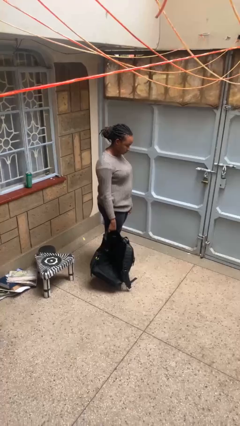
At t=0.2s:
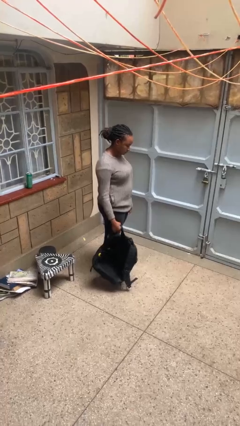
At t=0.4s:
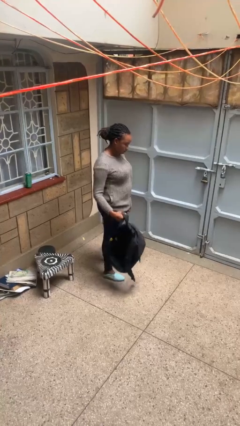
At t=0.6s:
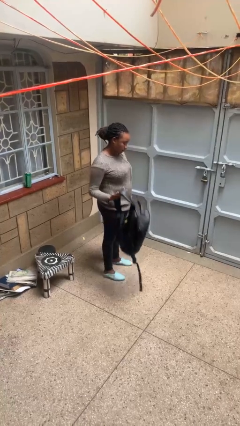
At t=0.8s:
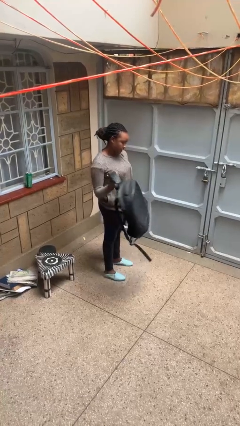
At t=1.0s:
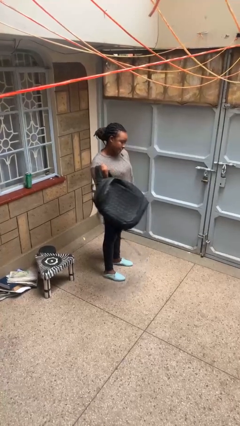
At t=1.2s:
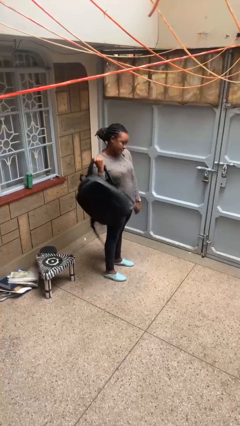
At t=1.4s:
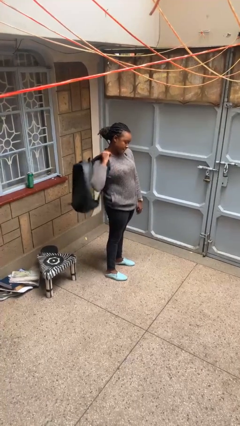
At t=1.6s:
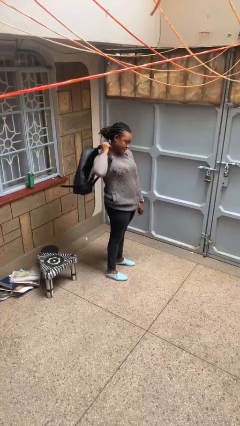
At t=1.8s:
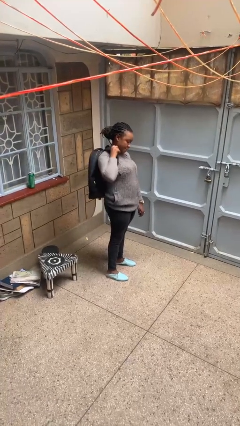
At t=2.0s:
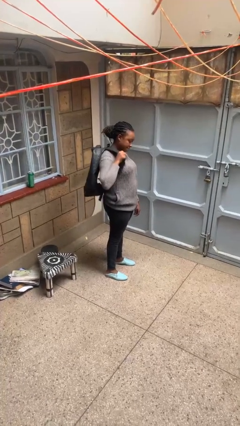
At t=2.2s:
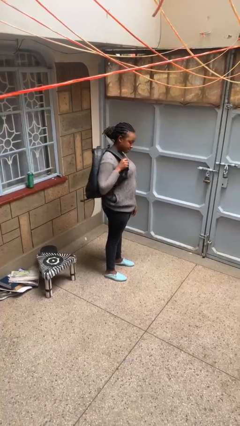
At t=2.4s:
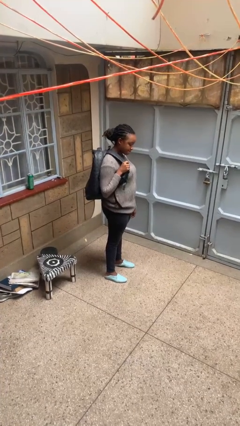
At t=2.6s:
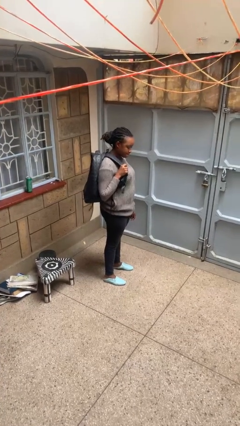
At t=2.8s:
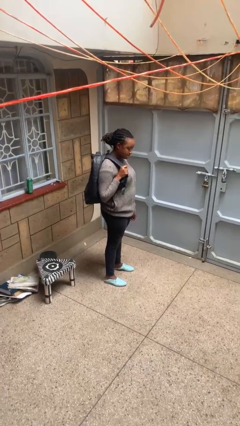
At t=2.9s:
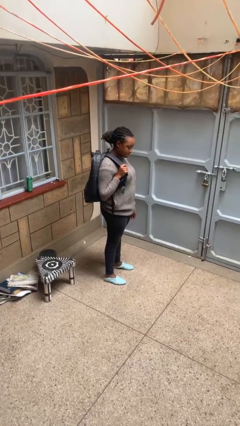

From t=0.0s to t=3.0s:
person puts on backpack

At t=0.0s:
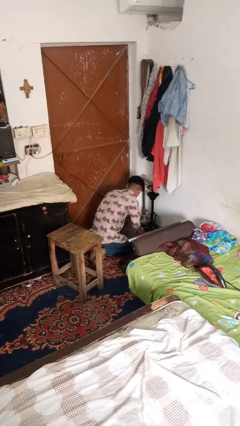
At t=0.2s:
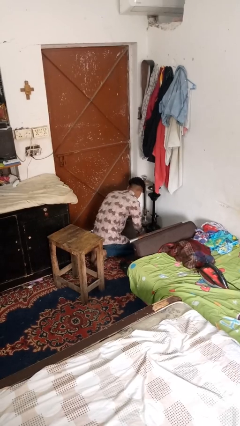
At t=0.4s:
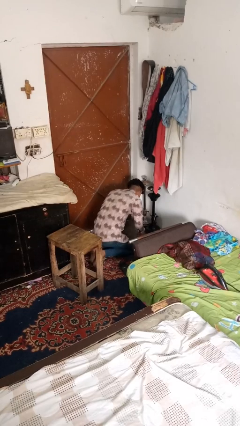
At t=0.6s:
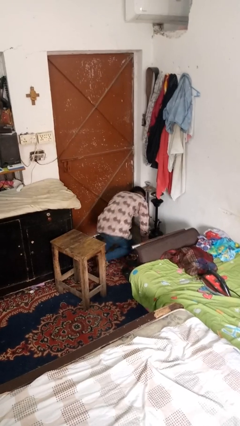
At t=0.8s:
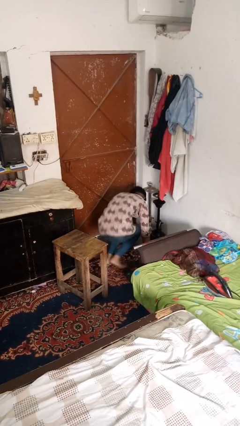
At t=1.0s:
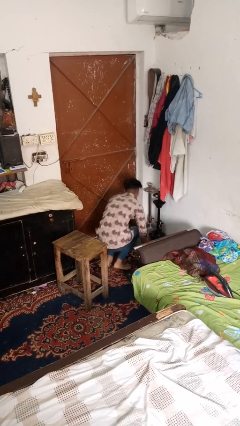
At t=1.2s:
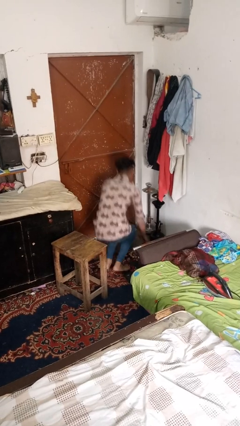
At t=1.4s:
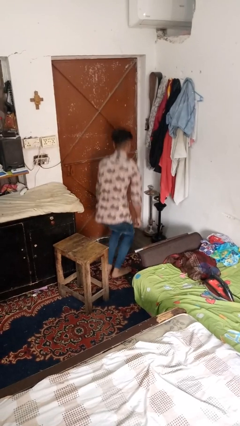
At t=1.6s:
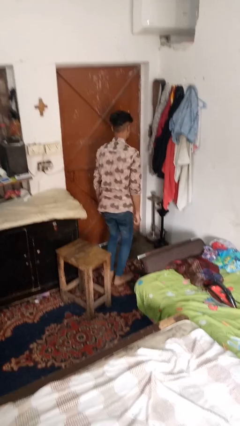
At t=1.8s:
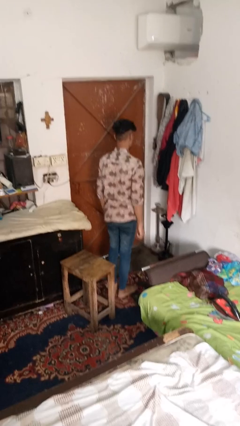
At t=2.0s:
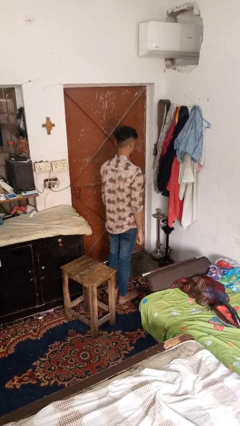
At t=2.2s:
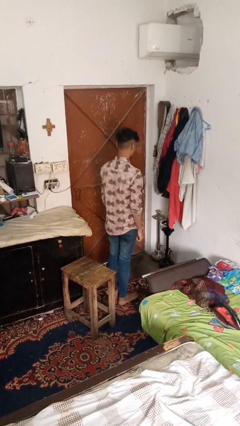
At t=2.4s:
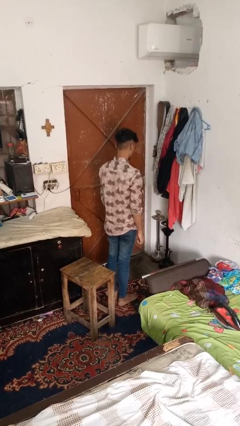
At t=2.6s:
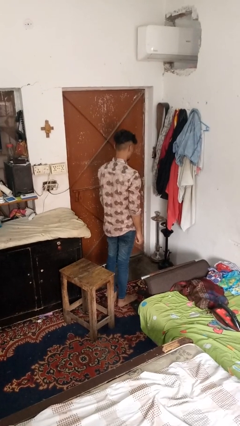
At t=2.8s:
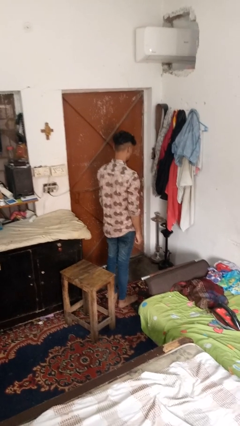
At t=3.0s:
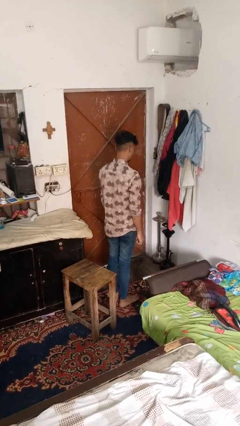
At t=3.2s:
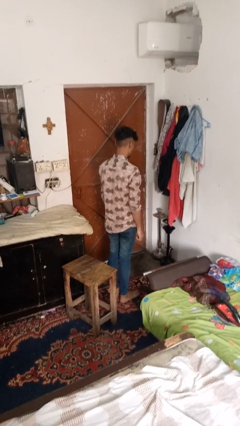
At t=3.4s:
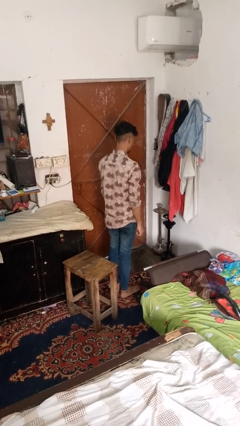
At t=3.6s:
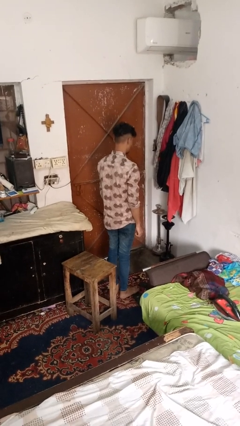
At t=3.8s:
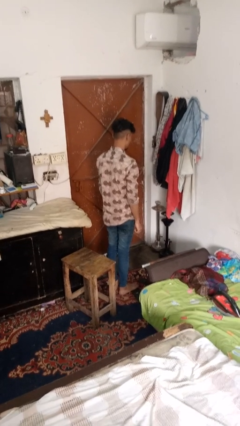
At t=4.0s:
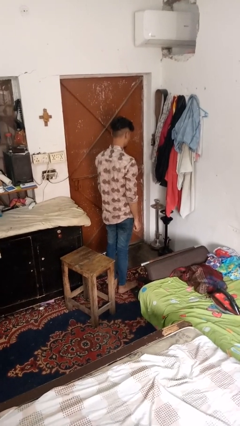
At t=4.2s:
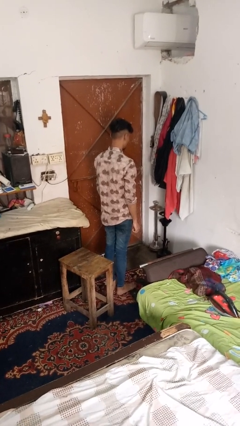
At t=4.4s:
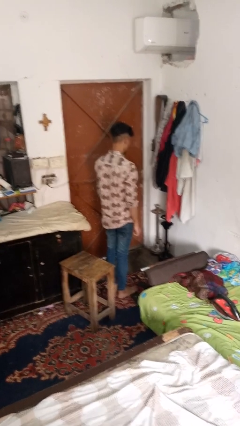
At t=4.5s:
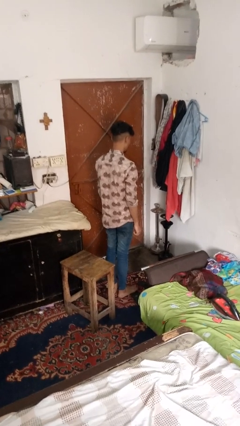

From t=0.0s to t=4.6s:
person stands up from floor

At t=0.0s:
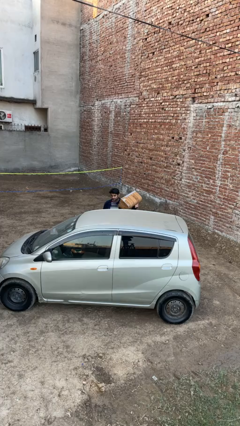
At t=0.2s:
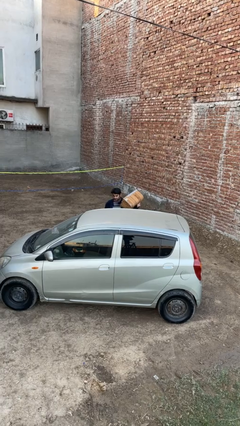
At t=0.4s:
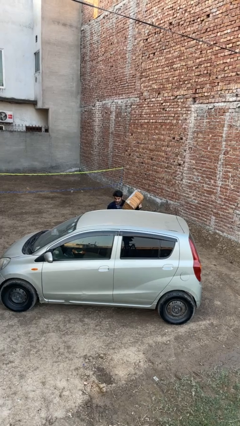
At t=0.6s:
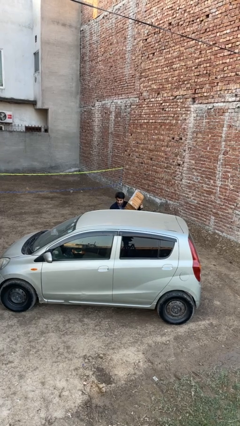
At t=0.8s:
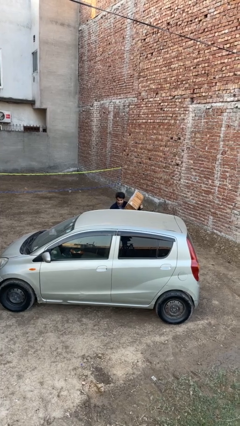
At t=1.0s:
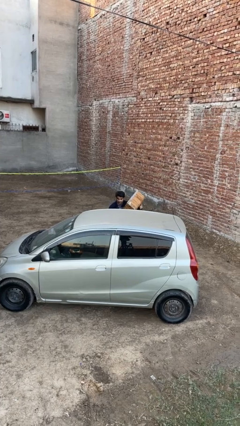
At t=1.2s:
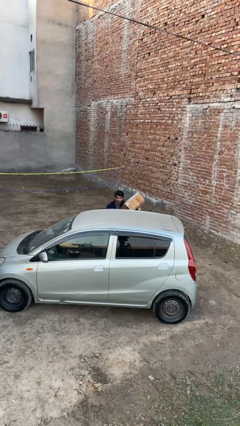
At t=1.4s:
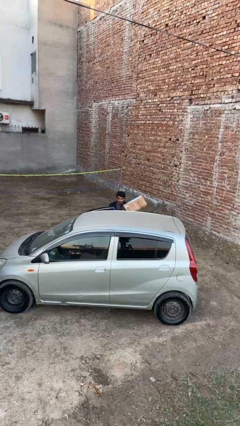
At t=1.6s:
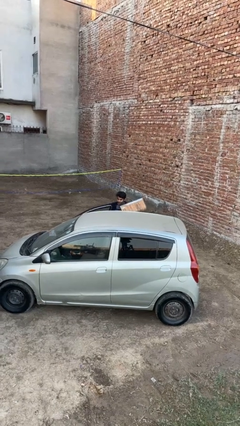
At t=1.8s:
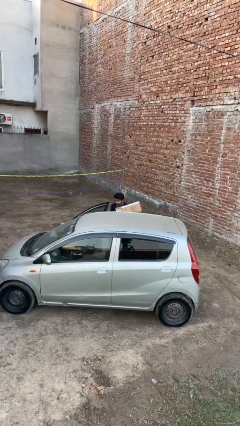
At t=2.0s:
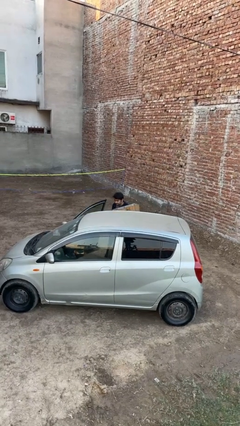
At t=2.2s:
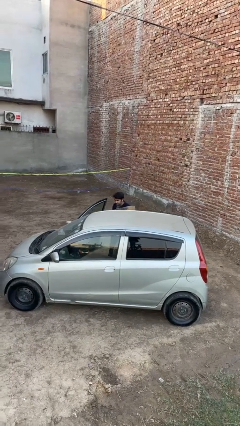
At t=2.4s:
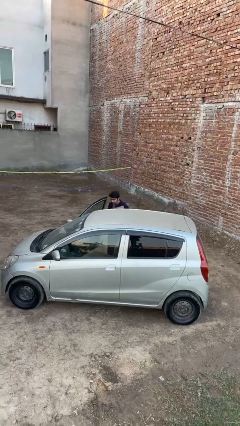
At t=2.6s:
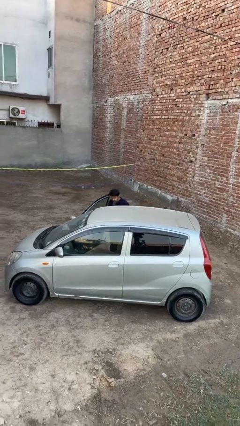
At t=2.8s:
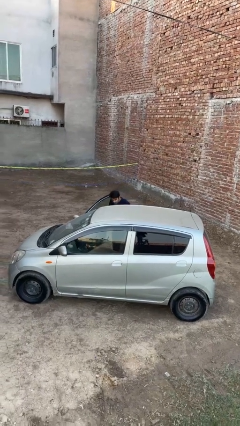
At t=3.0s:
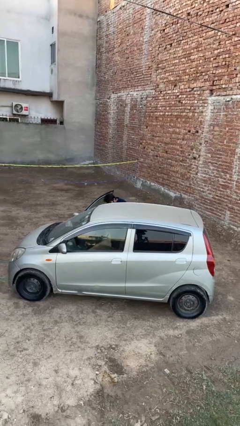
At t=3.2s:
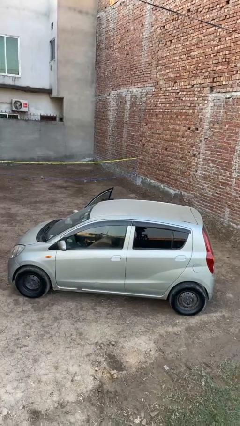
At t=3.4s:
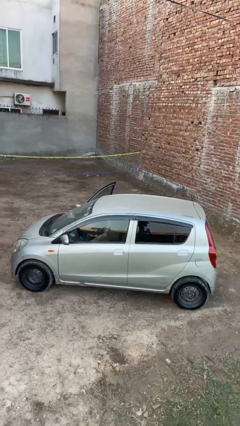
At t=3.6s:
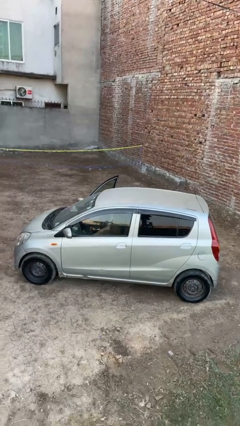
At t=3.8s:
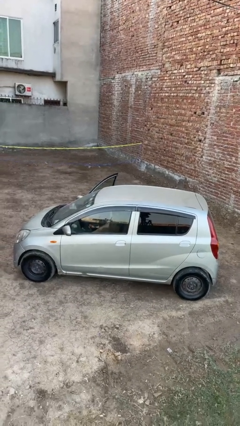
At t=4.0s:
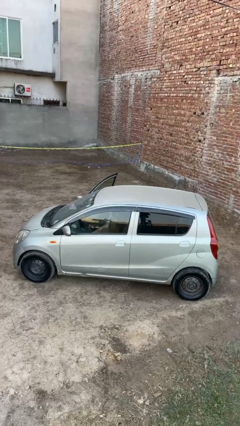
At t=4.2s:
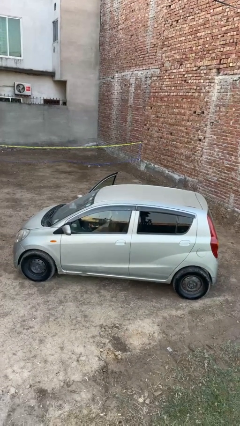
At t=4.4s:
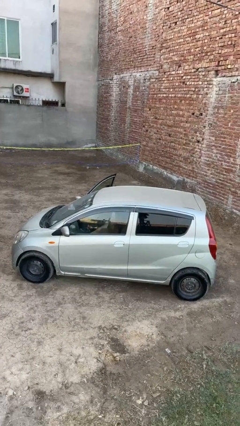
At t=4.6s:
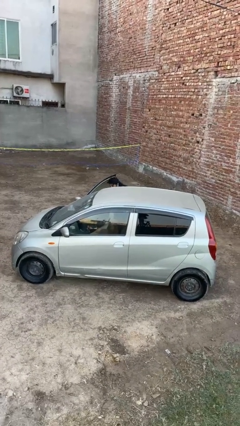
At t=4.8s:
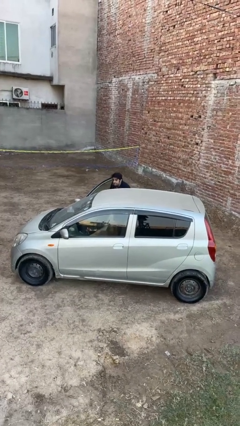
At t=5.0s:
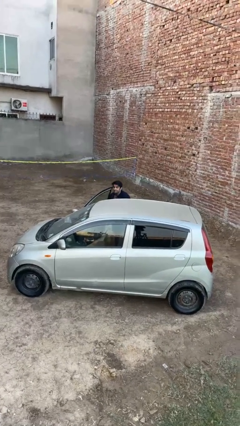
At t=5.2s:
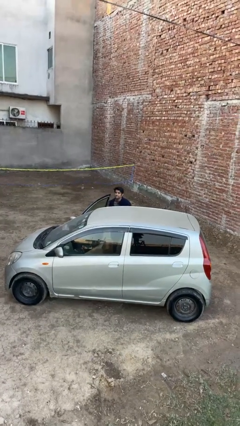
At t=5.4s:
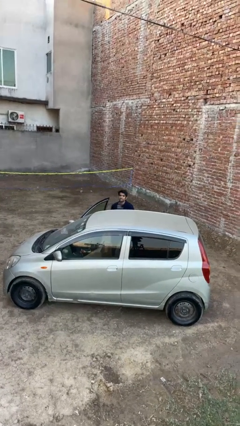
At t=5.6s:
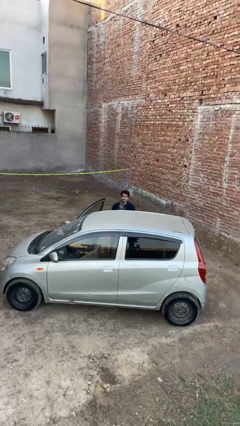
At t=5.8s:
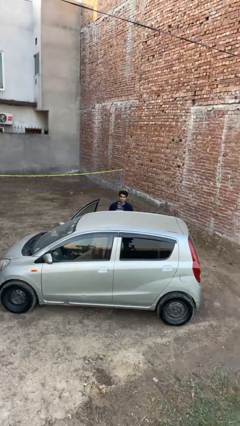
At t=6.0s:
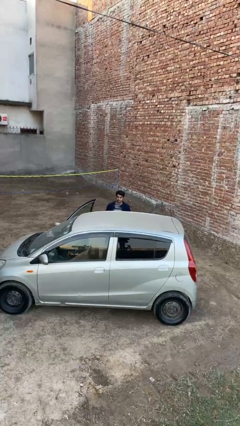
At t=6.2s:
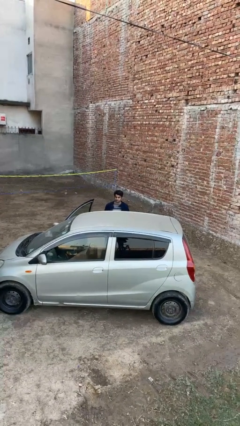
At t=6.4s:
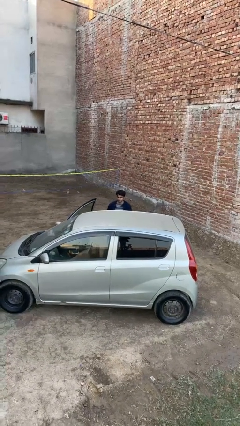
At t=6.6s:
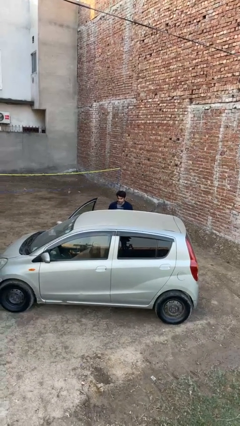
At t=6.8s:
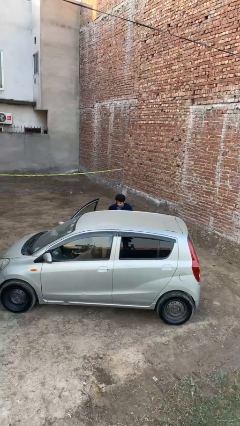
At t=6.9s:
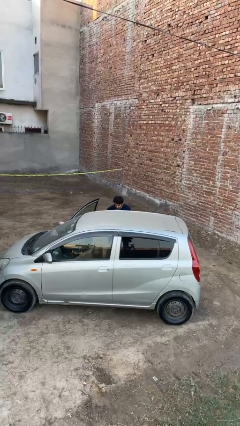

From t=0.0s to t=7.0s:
person loads car

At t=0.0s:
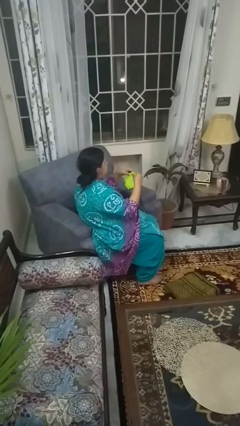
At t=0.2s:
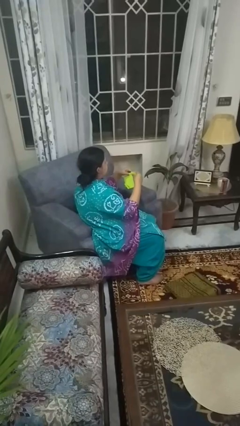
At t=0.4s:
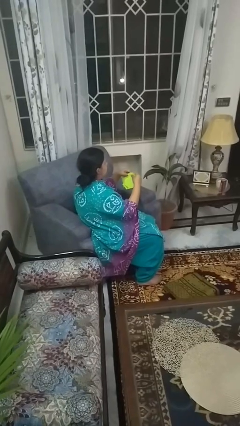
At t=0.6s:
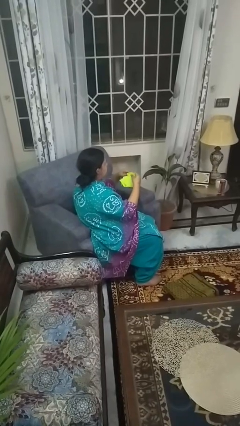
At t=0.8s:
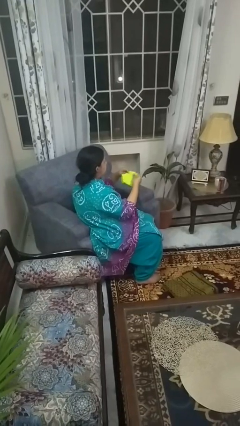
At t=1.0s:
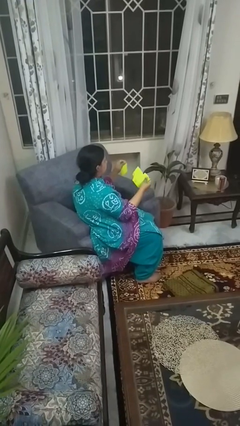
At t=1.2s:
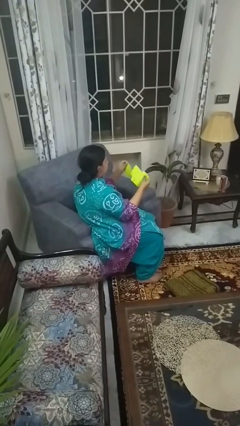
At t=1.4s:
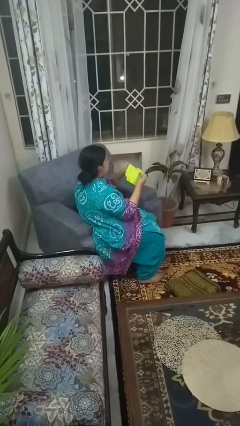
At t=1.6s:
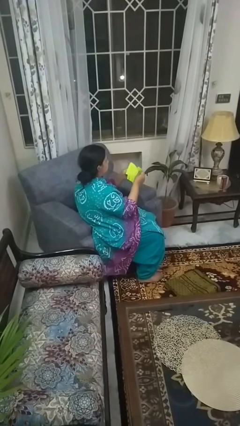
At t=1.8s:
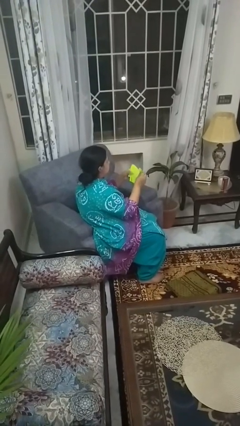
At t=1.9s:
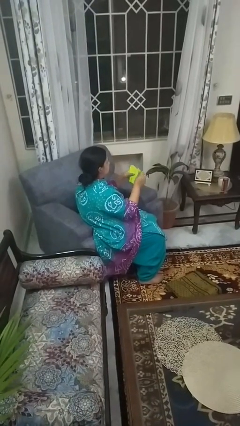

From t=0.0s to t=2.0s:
person tears paper

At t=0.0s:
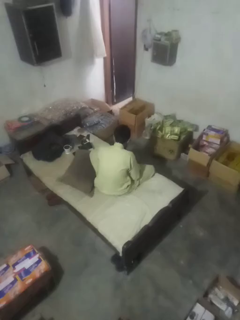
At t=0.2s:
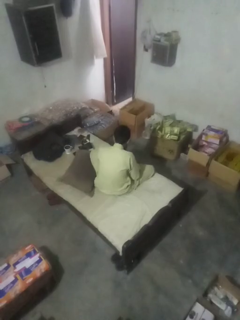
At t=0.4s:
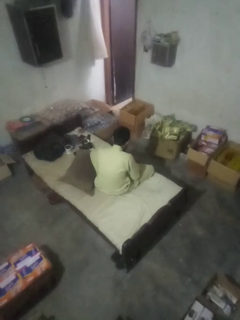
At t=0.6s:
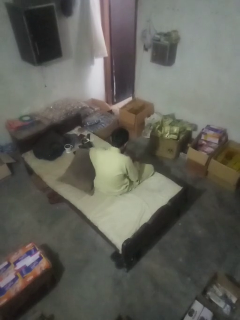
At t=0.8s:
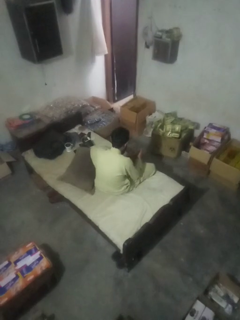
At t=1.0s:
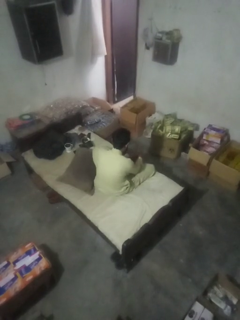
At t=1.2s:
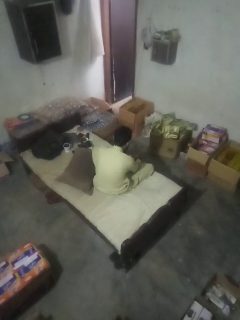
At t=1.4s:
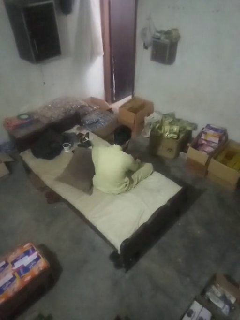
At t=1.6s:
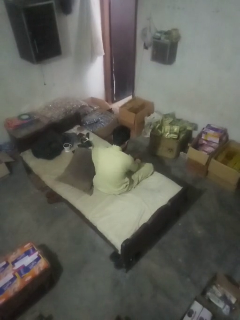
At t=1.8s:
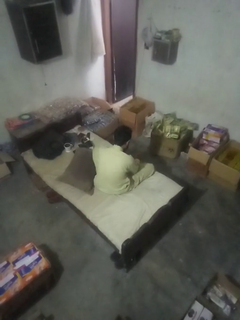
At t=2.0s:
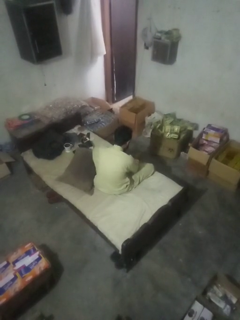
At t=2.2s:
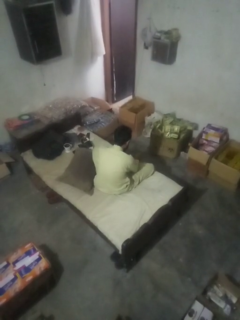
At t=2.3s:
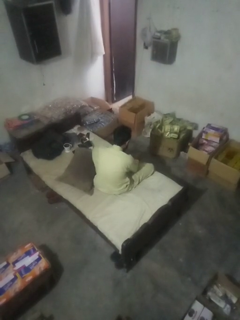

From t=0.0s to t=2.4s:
person rubs foot
